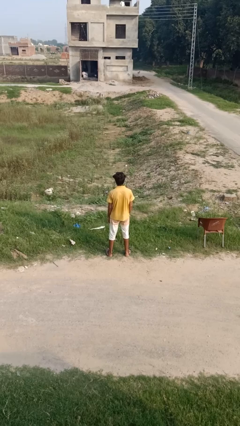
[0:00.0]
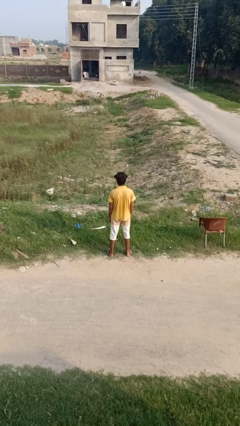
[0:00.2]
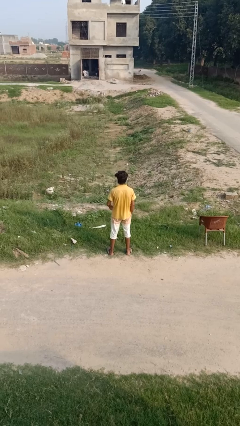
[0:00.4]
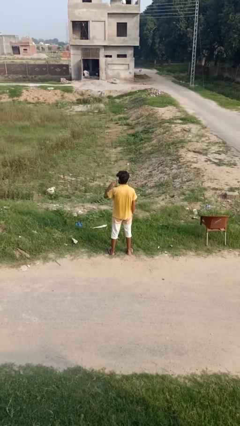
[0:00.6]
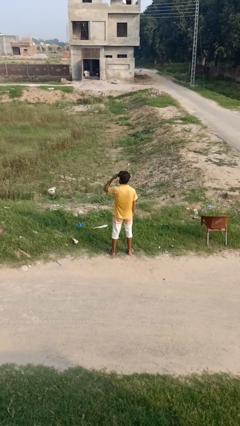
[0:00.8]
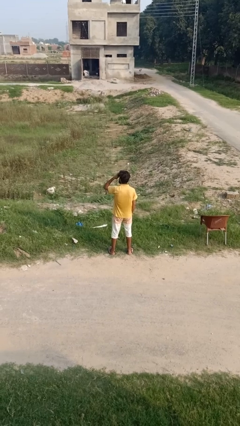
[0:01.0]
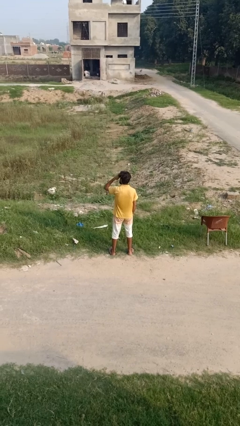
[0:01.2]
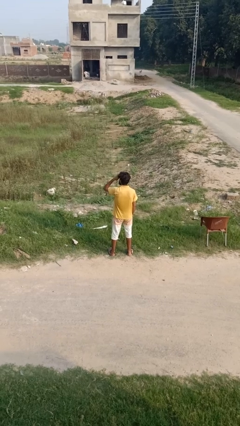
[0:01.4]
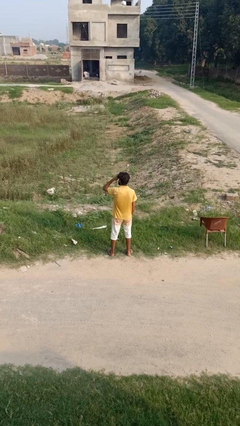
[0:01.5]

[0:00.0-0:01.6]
person shades eyes

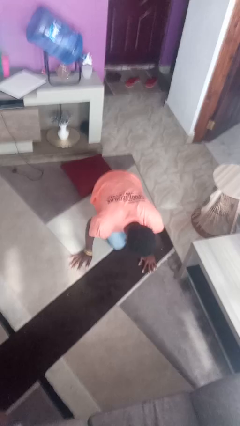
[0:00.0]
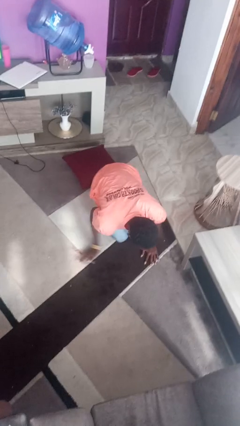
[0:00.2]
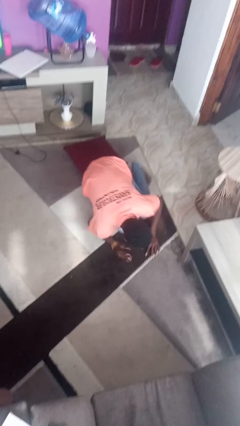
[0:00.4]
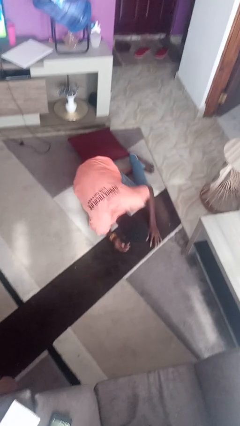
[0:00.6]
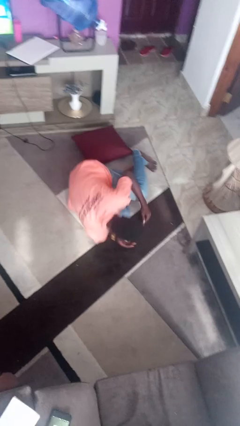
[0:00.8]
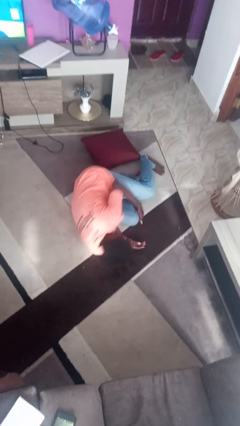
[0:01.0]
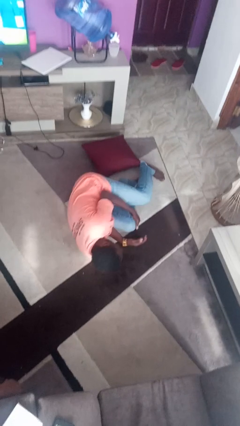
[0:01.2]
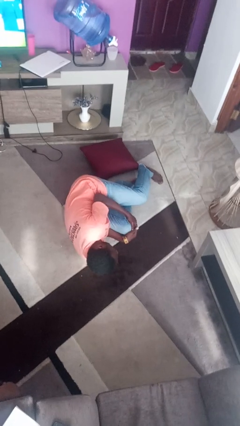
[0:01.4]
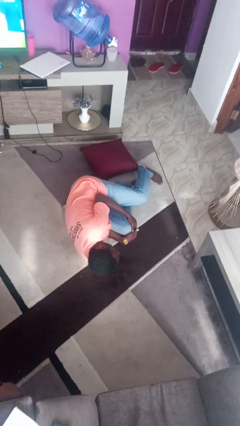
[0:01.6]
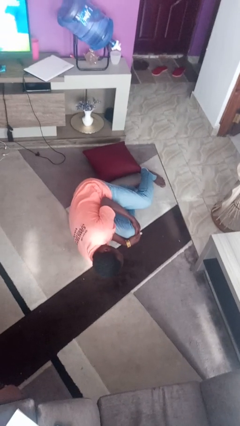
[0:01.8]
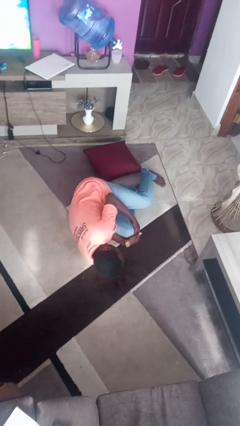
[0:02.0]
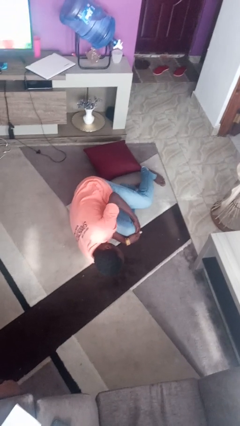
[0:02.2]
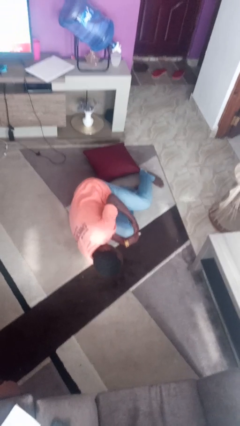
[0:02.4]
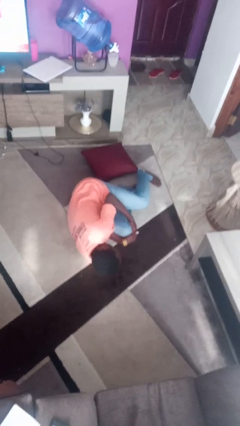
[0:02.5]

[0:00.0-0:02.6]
person lies down on floor

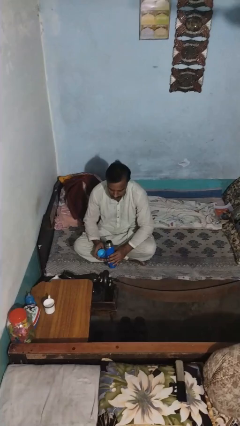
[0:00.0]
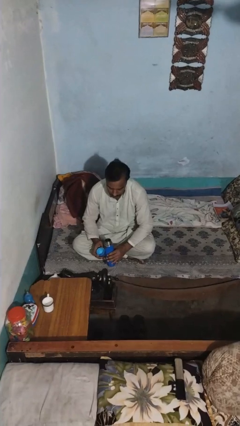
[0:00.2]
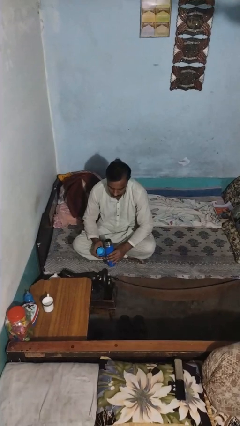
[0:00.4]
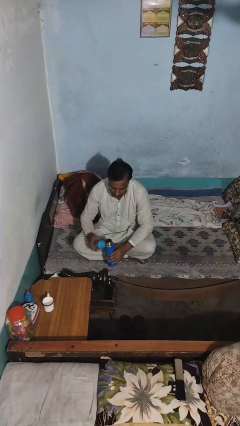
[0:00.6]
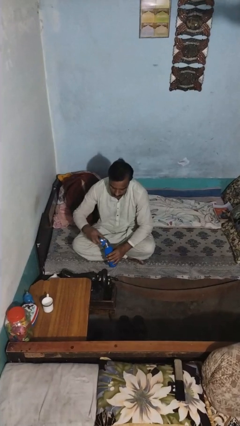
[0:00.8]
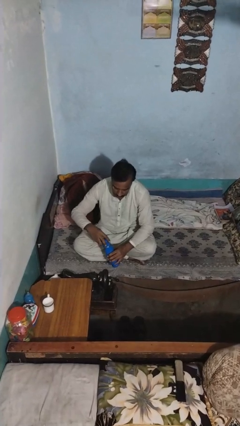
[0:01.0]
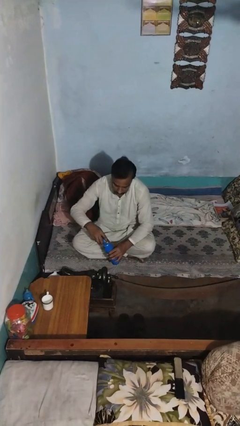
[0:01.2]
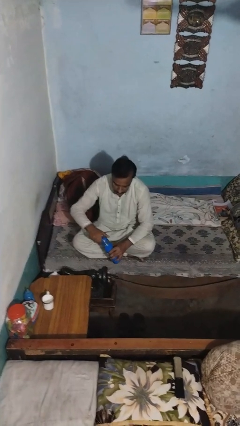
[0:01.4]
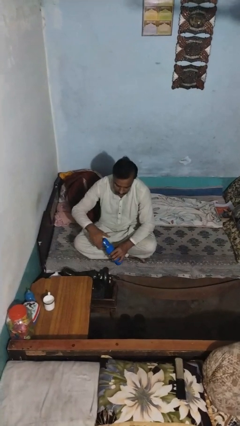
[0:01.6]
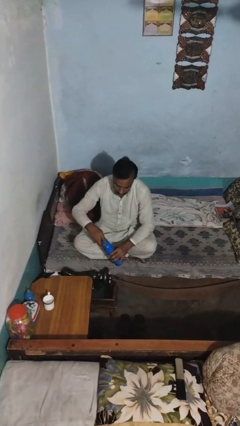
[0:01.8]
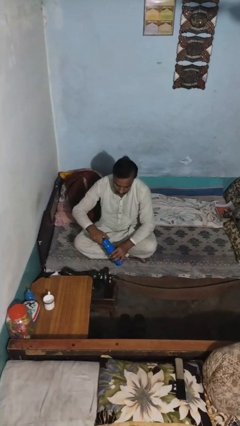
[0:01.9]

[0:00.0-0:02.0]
person screws lid to bottle

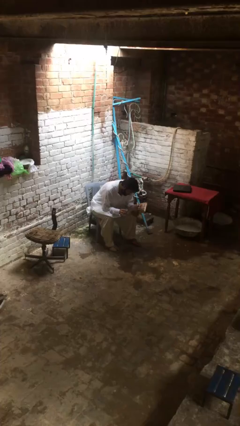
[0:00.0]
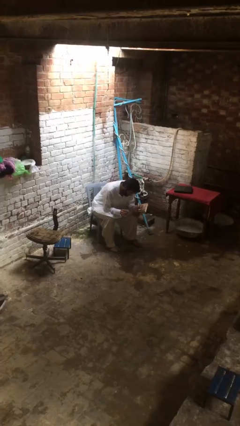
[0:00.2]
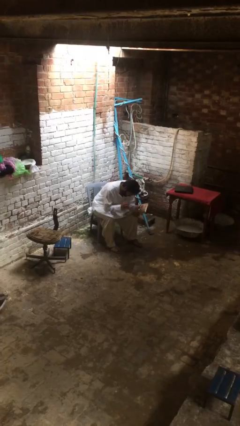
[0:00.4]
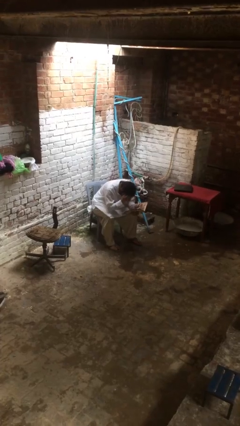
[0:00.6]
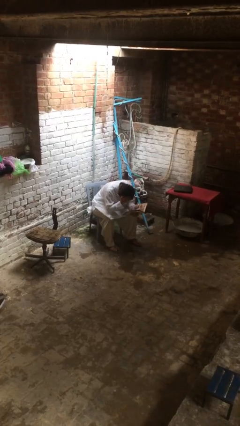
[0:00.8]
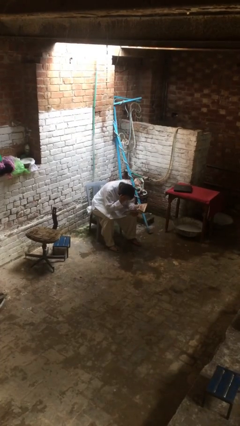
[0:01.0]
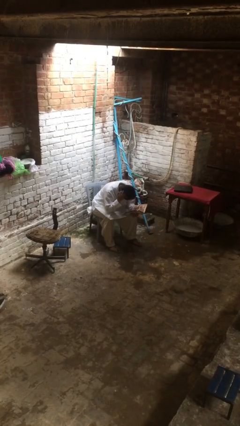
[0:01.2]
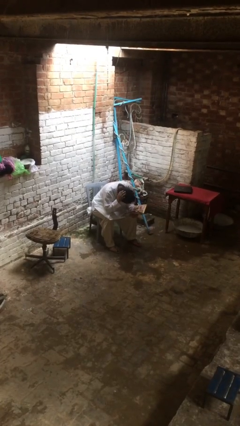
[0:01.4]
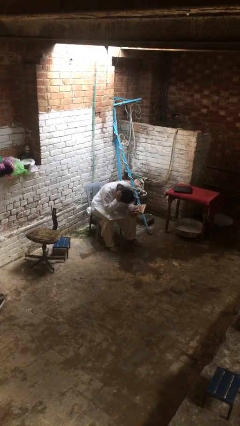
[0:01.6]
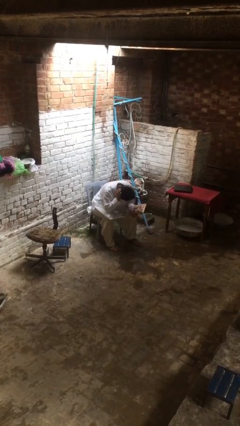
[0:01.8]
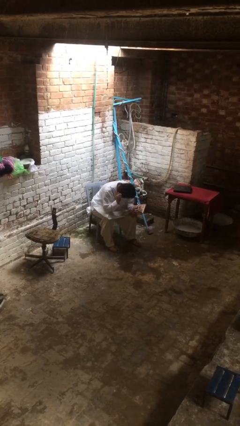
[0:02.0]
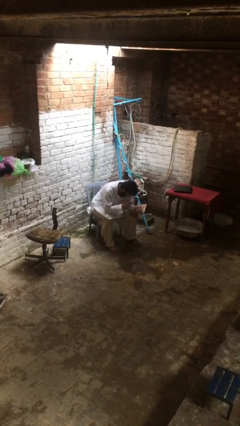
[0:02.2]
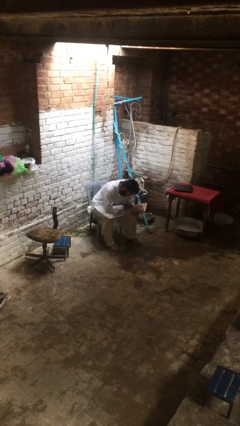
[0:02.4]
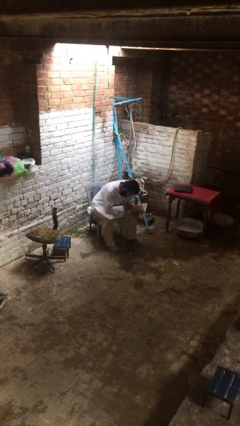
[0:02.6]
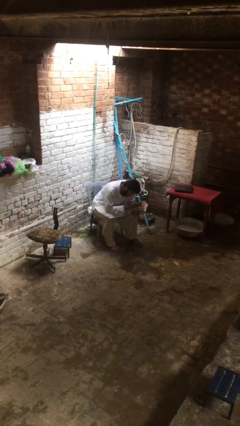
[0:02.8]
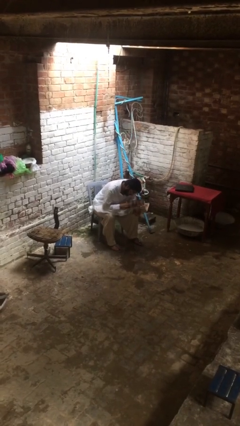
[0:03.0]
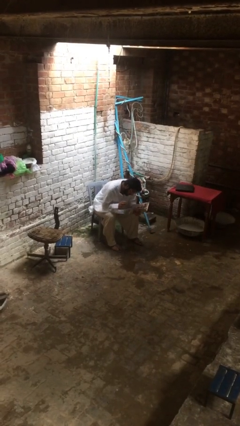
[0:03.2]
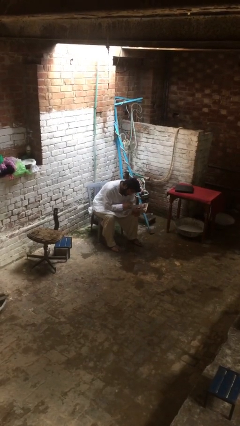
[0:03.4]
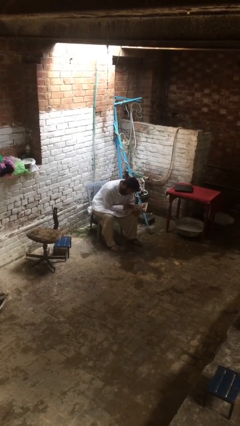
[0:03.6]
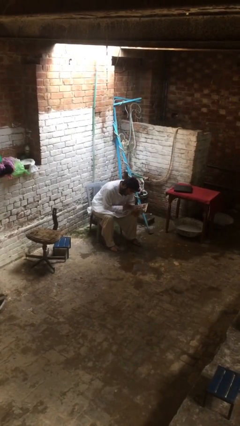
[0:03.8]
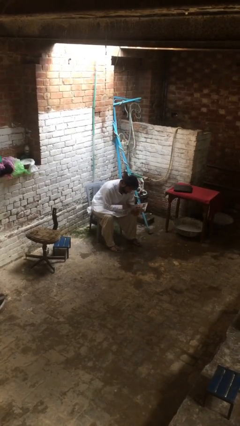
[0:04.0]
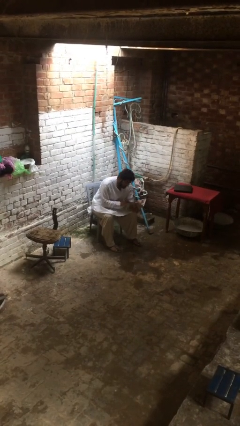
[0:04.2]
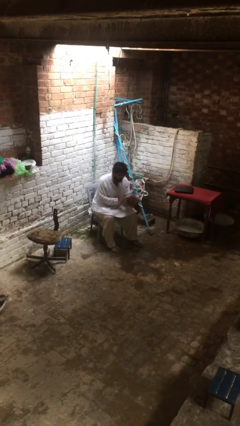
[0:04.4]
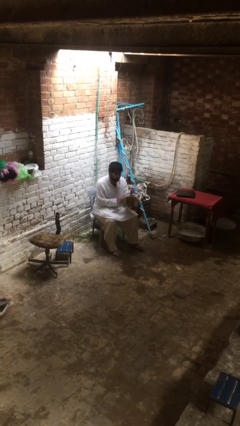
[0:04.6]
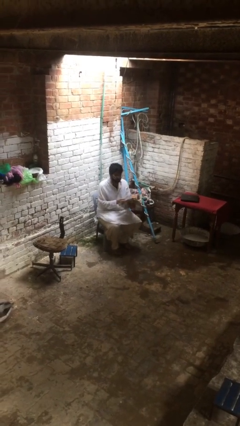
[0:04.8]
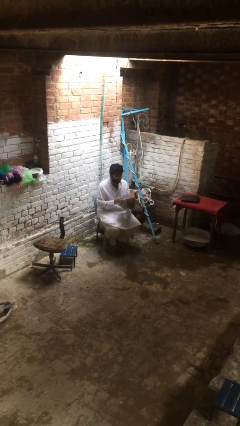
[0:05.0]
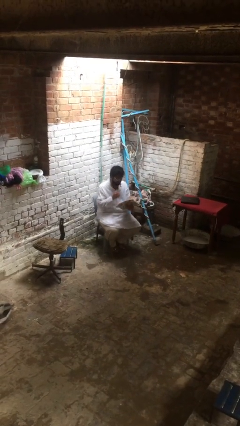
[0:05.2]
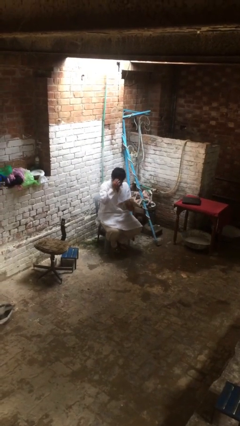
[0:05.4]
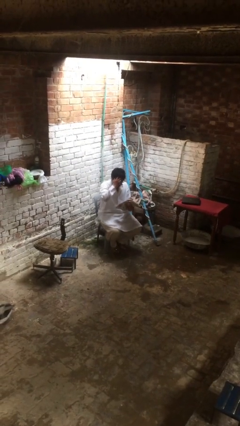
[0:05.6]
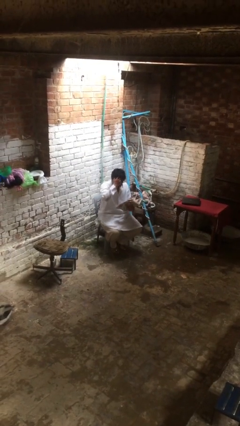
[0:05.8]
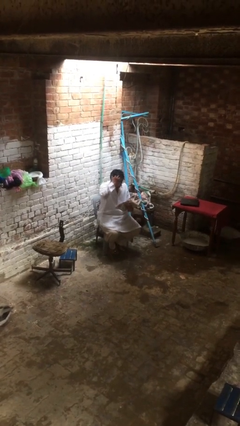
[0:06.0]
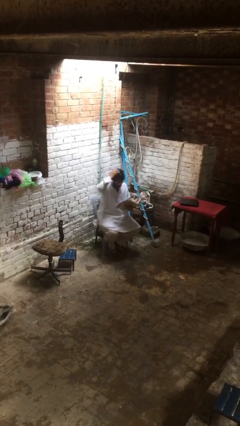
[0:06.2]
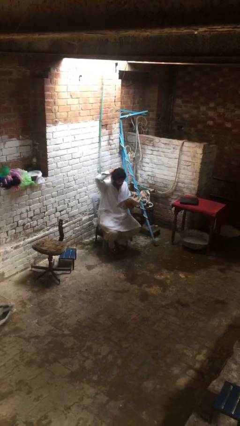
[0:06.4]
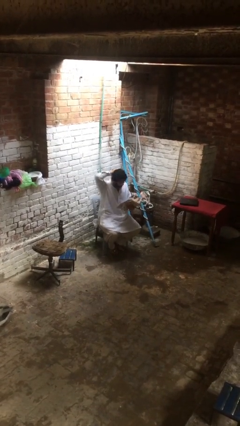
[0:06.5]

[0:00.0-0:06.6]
person reads document

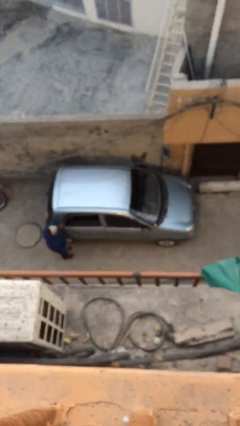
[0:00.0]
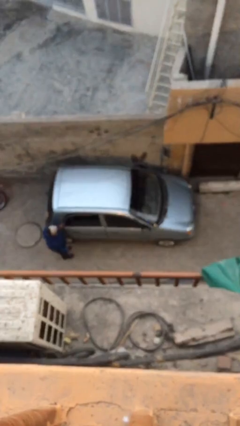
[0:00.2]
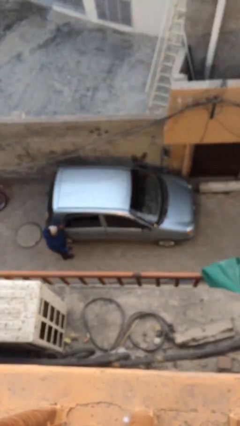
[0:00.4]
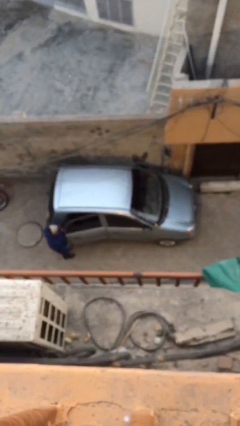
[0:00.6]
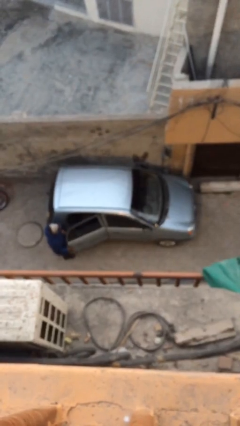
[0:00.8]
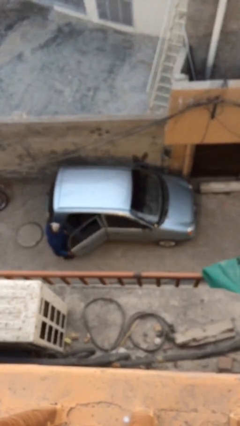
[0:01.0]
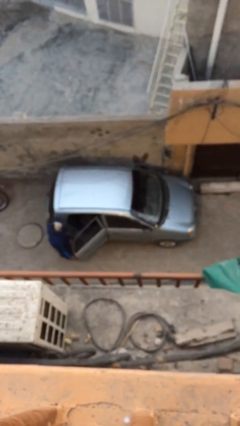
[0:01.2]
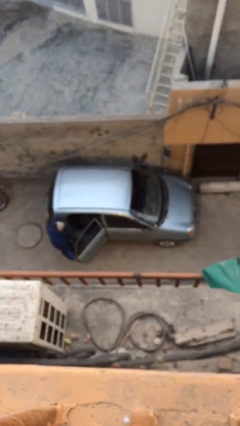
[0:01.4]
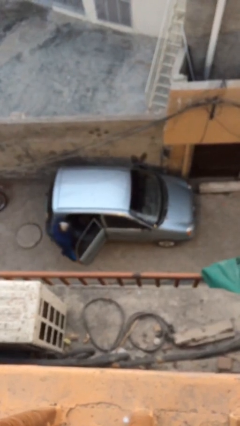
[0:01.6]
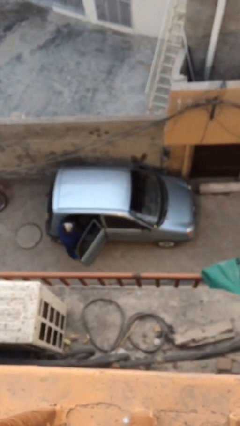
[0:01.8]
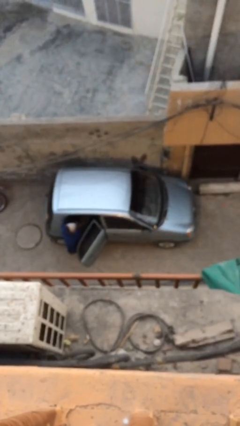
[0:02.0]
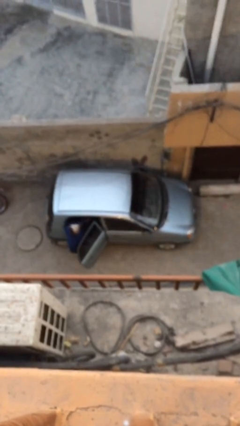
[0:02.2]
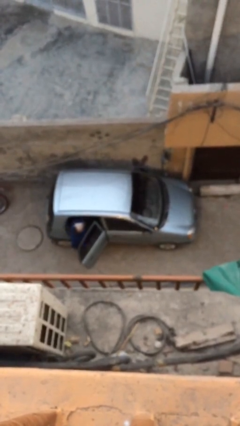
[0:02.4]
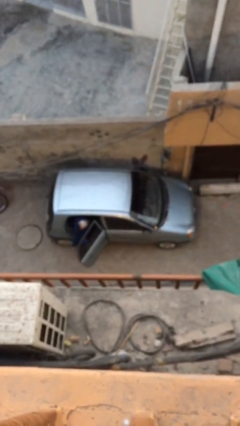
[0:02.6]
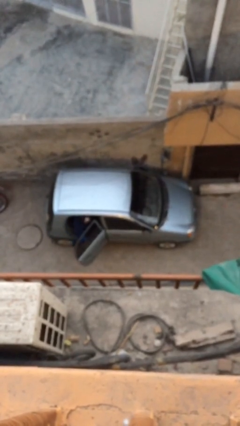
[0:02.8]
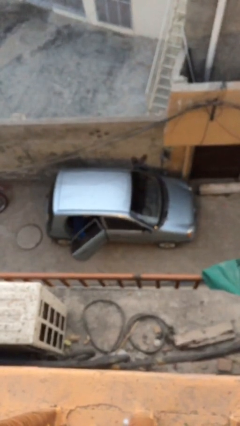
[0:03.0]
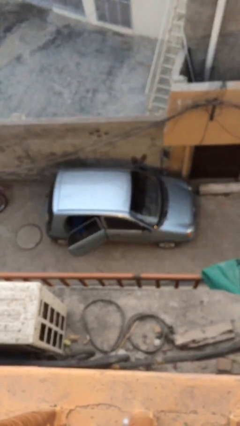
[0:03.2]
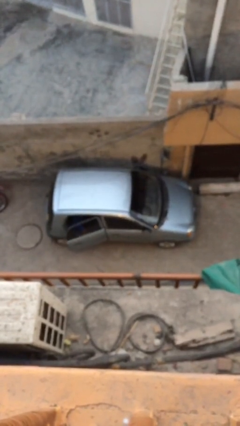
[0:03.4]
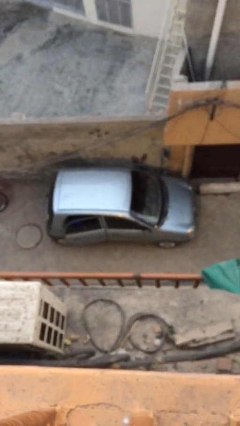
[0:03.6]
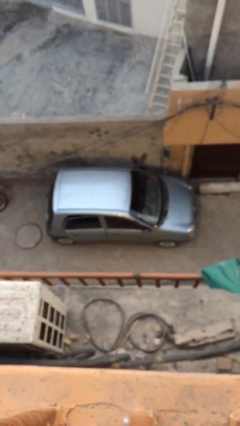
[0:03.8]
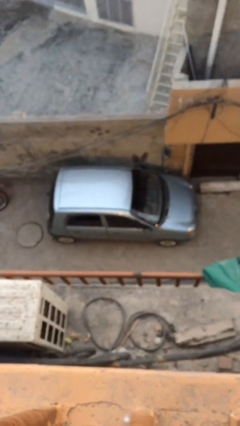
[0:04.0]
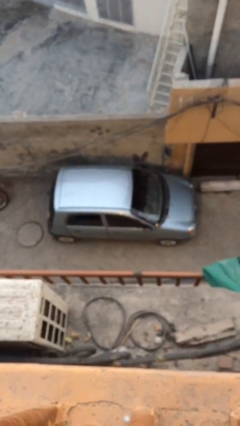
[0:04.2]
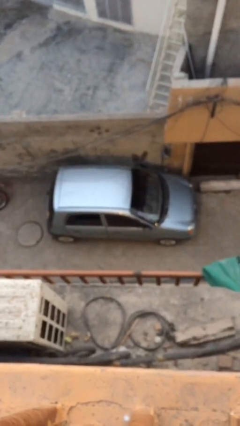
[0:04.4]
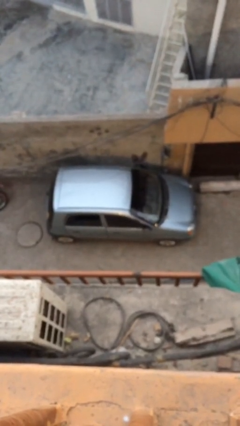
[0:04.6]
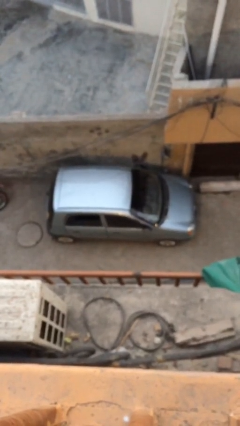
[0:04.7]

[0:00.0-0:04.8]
car picks up person
